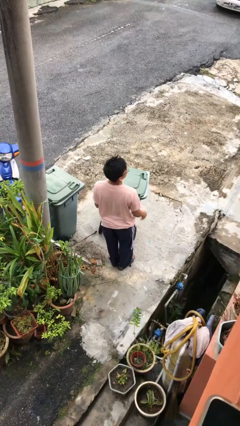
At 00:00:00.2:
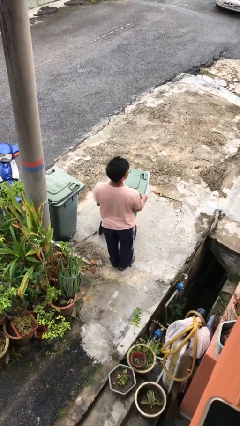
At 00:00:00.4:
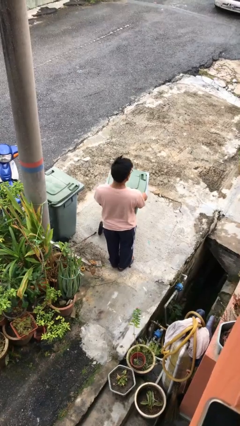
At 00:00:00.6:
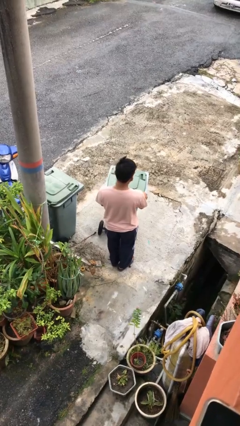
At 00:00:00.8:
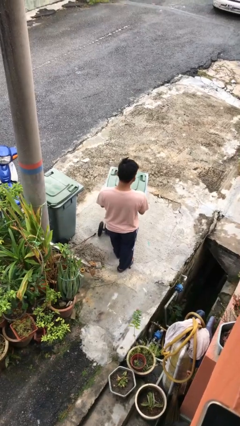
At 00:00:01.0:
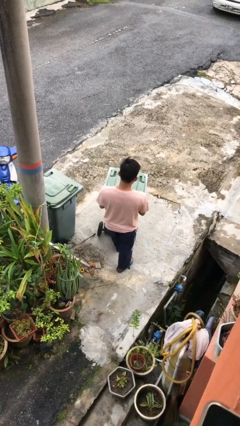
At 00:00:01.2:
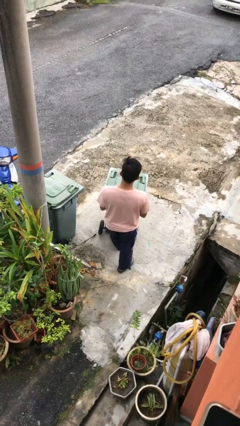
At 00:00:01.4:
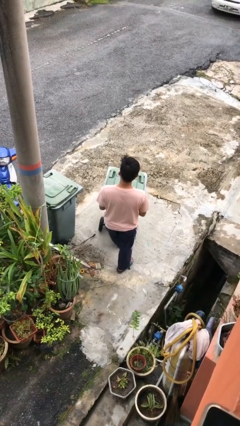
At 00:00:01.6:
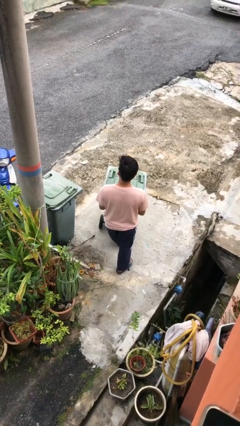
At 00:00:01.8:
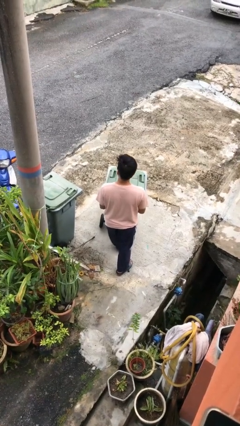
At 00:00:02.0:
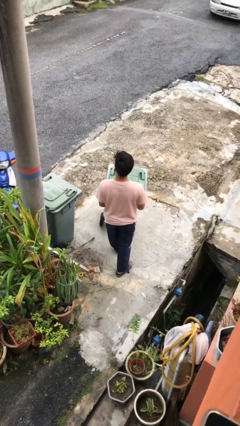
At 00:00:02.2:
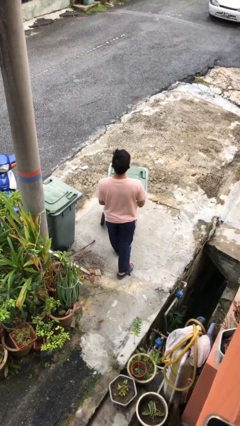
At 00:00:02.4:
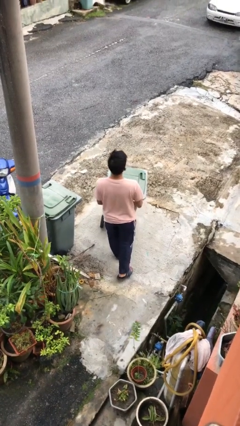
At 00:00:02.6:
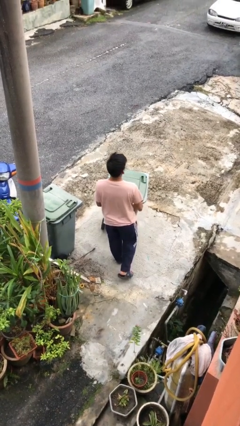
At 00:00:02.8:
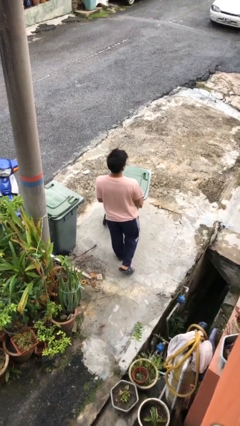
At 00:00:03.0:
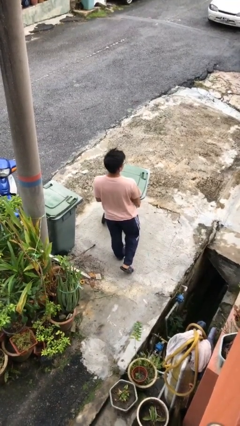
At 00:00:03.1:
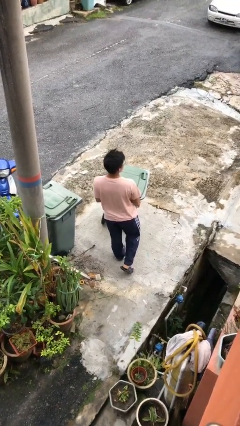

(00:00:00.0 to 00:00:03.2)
person pushes wheeled trashcan

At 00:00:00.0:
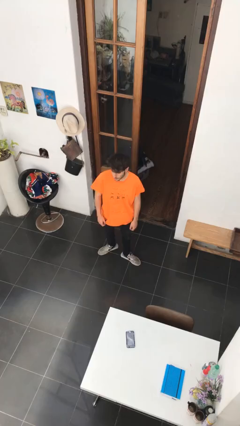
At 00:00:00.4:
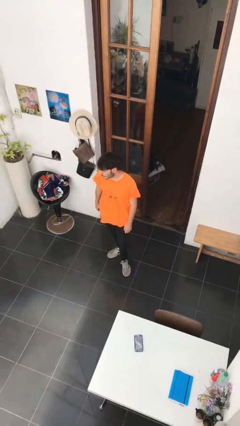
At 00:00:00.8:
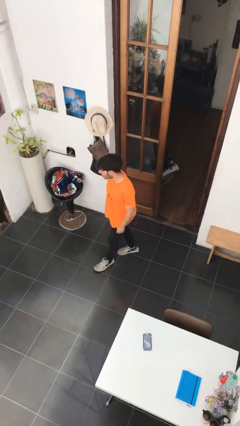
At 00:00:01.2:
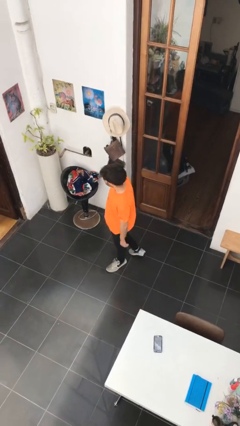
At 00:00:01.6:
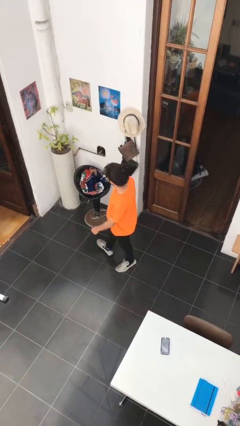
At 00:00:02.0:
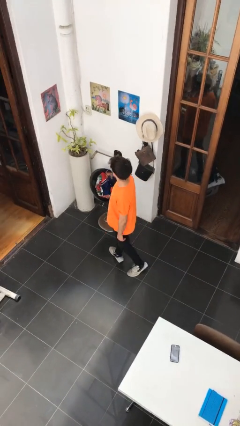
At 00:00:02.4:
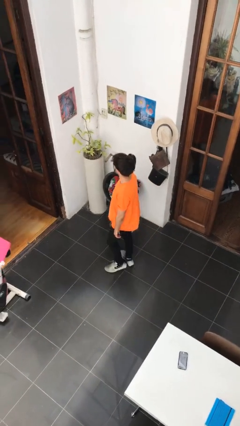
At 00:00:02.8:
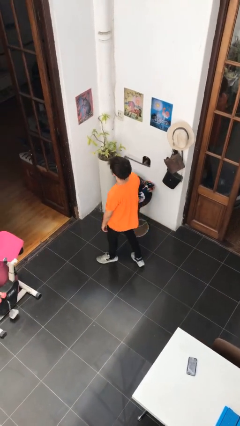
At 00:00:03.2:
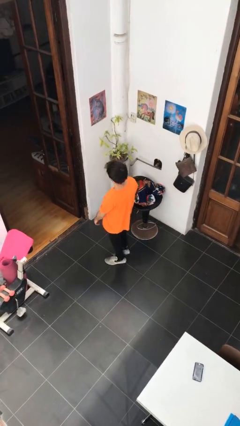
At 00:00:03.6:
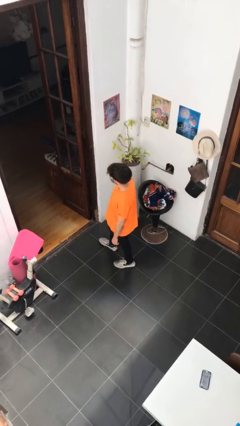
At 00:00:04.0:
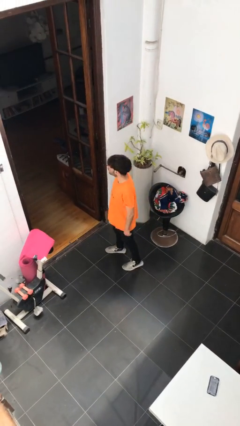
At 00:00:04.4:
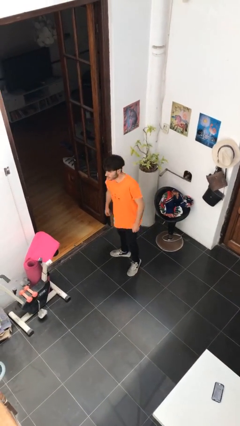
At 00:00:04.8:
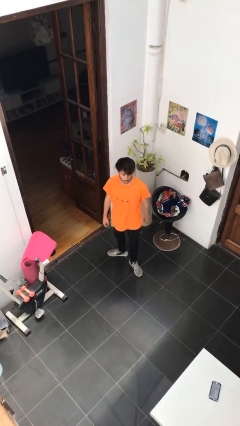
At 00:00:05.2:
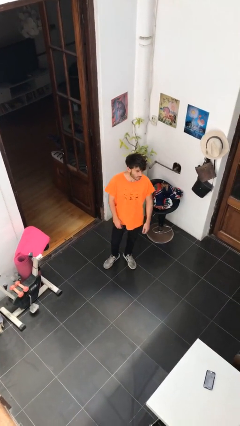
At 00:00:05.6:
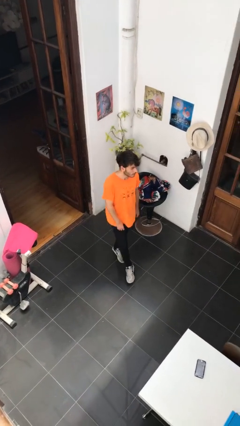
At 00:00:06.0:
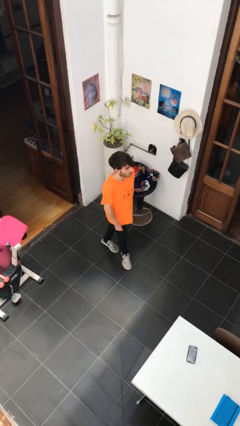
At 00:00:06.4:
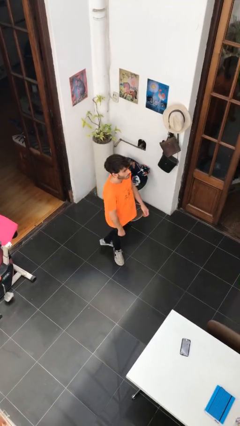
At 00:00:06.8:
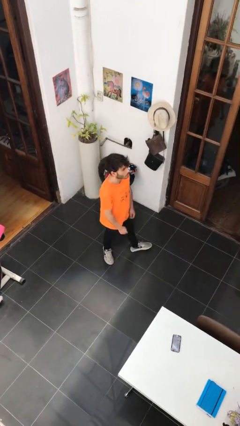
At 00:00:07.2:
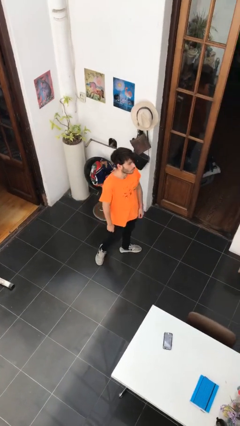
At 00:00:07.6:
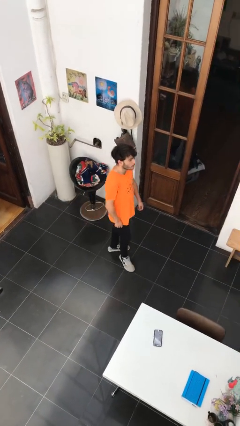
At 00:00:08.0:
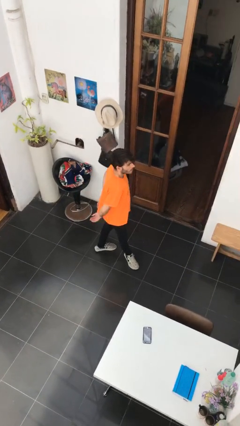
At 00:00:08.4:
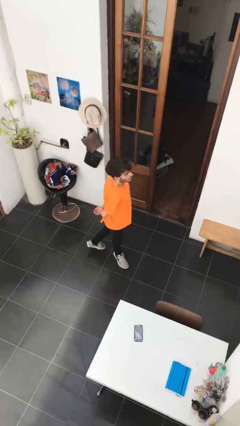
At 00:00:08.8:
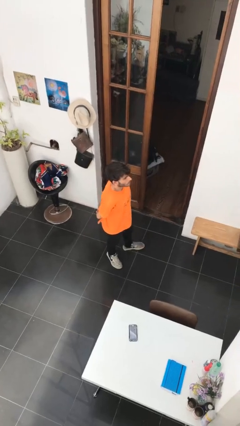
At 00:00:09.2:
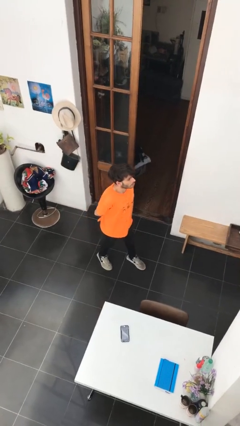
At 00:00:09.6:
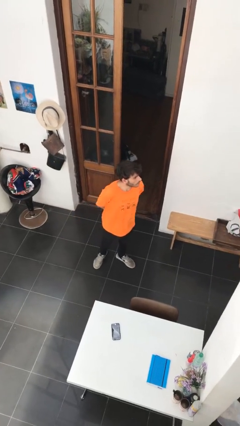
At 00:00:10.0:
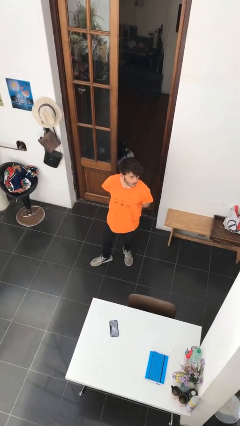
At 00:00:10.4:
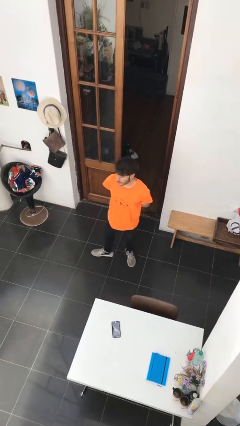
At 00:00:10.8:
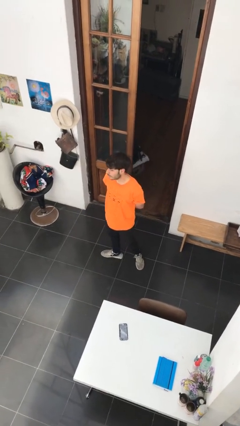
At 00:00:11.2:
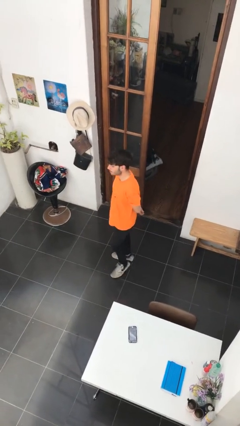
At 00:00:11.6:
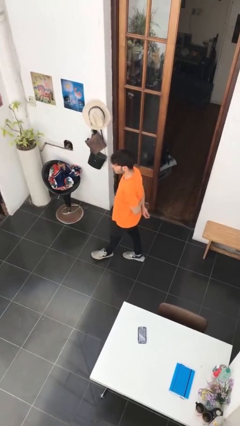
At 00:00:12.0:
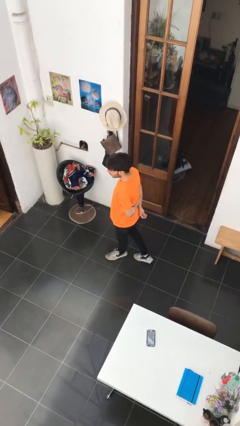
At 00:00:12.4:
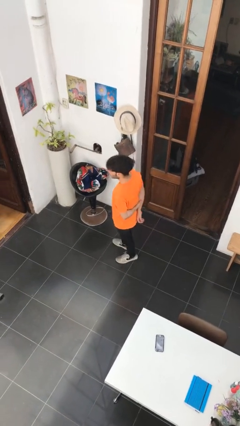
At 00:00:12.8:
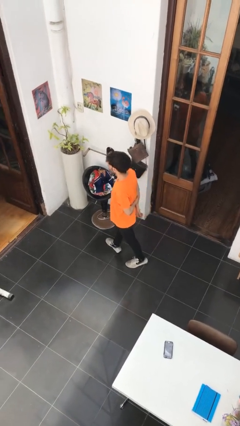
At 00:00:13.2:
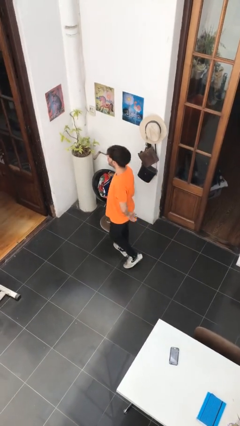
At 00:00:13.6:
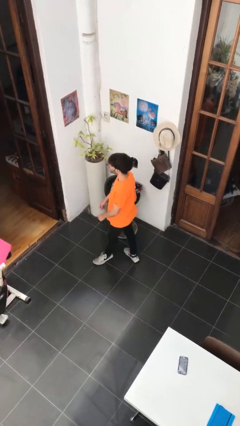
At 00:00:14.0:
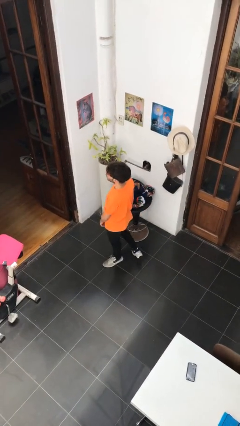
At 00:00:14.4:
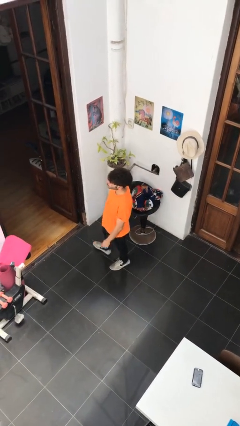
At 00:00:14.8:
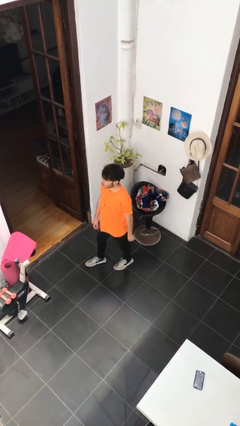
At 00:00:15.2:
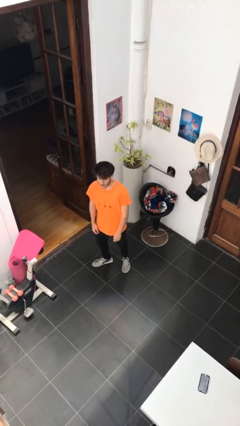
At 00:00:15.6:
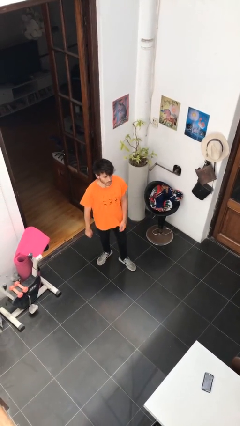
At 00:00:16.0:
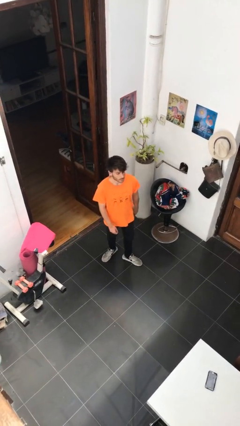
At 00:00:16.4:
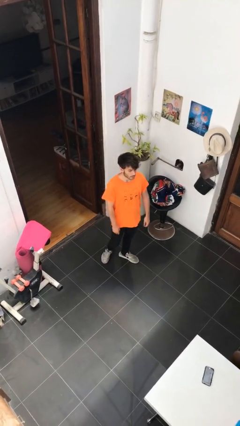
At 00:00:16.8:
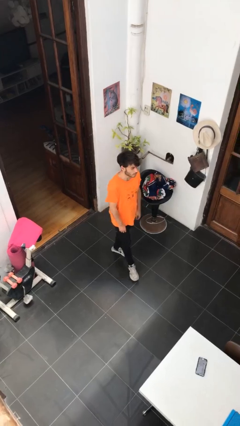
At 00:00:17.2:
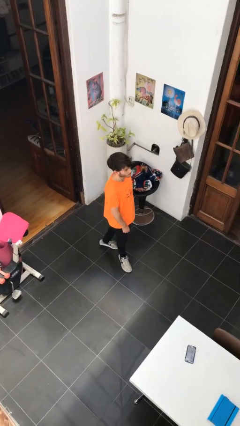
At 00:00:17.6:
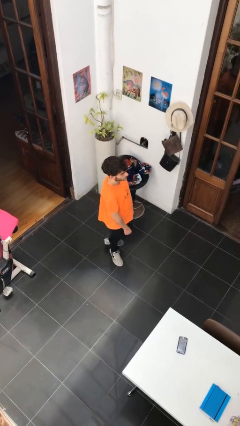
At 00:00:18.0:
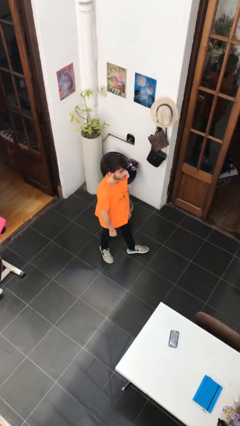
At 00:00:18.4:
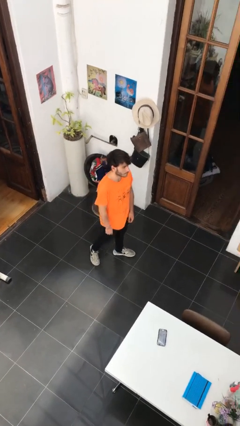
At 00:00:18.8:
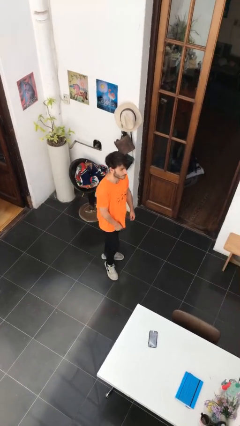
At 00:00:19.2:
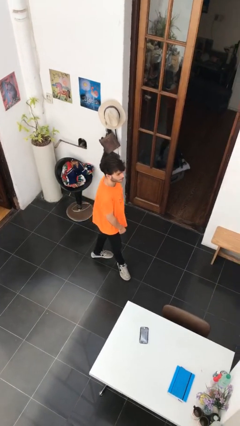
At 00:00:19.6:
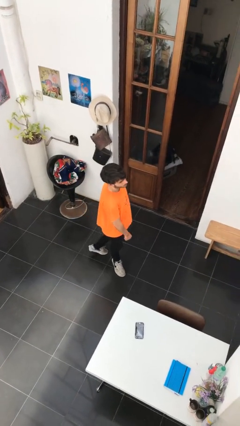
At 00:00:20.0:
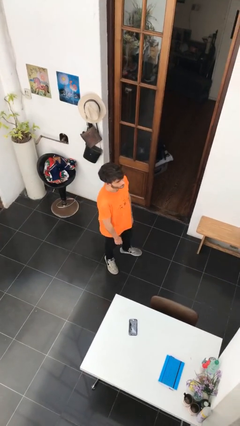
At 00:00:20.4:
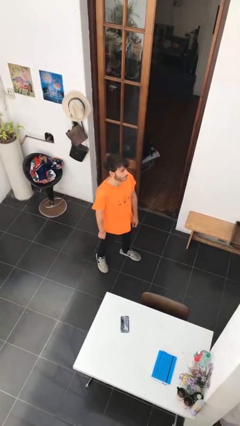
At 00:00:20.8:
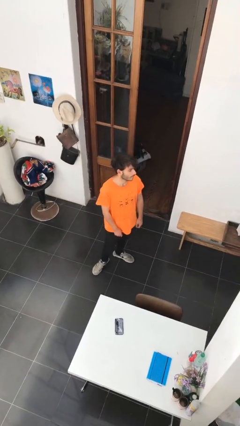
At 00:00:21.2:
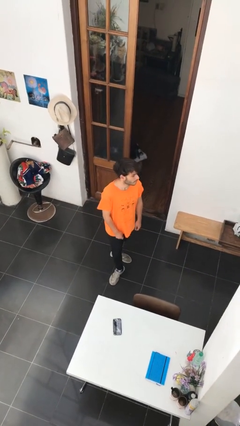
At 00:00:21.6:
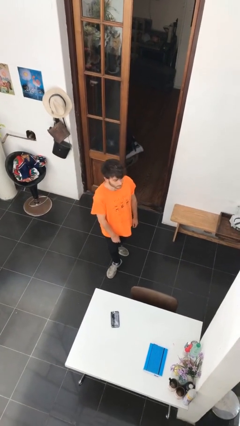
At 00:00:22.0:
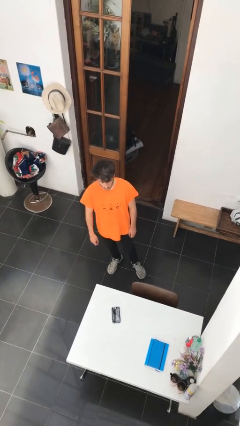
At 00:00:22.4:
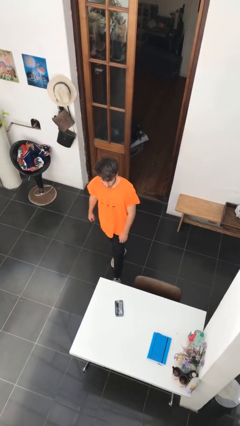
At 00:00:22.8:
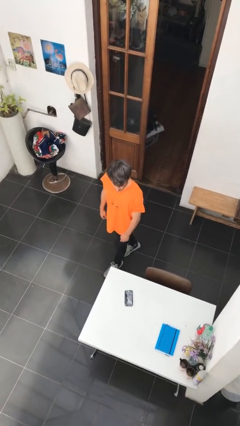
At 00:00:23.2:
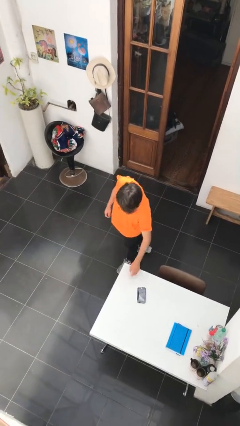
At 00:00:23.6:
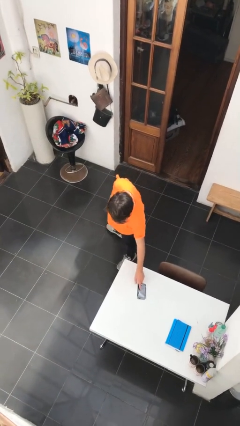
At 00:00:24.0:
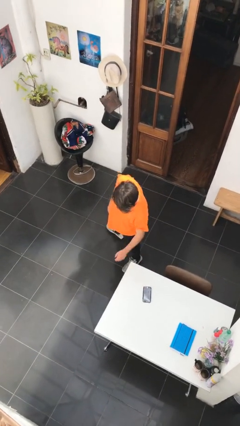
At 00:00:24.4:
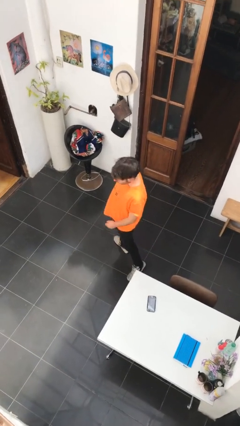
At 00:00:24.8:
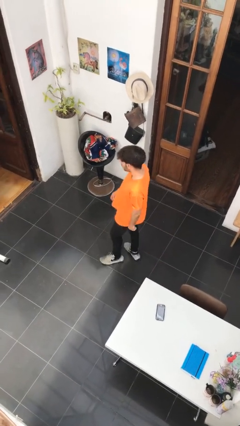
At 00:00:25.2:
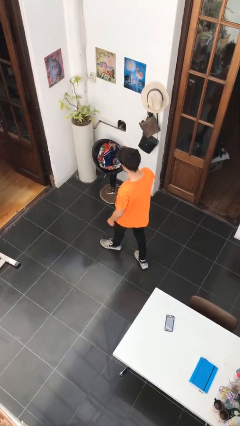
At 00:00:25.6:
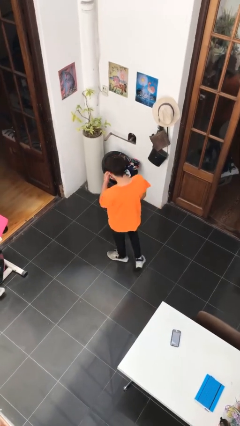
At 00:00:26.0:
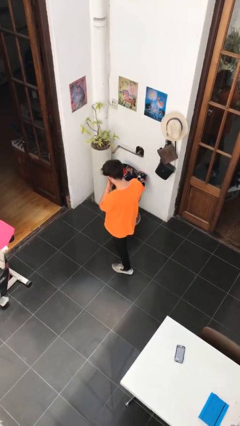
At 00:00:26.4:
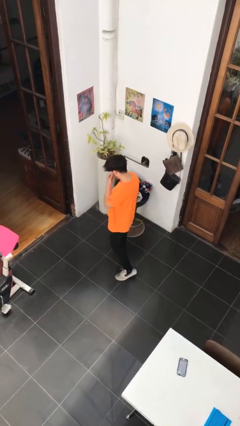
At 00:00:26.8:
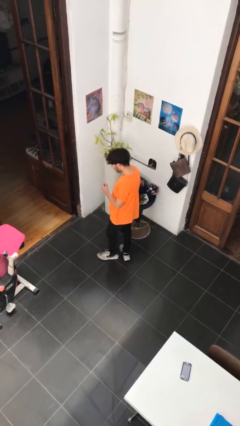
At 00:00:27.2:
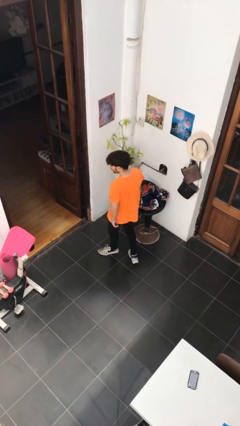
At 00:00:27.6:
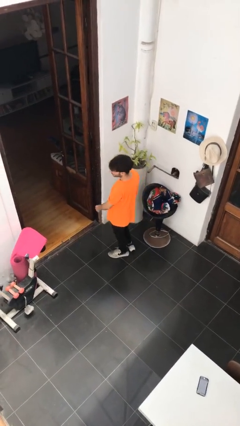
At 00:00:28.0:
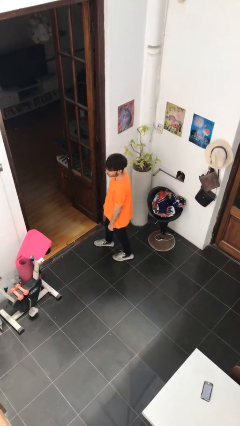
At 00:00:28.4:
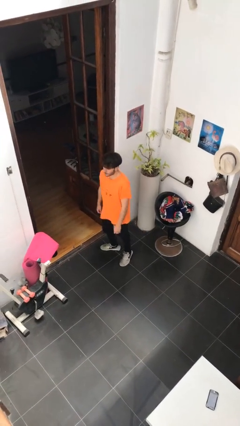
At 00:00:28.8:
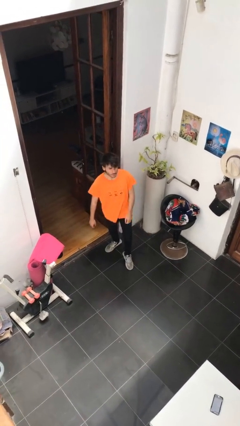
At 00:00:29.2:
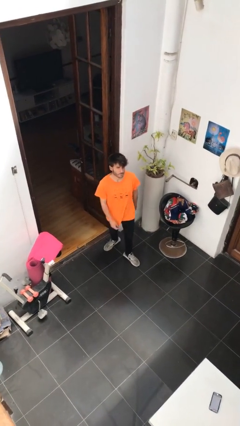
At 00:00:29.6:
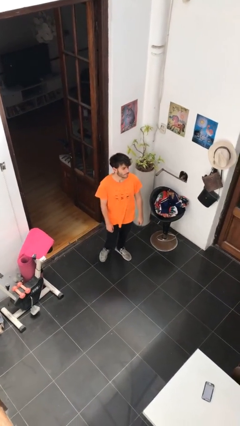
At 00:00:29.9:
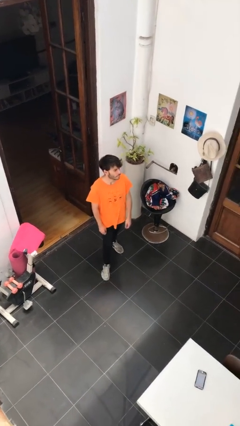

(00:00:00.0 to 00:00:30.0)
person walks
